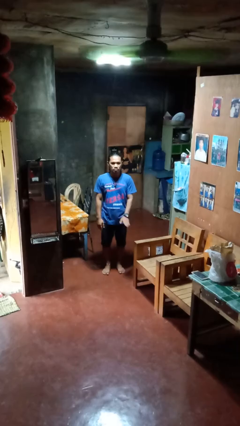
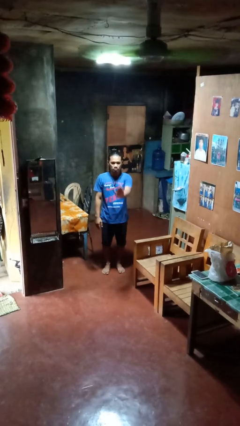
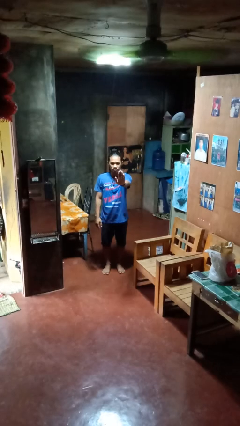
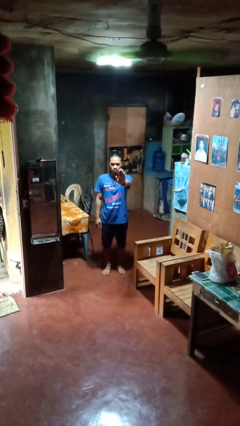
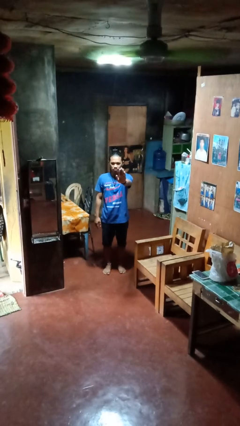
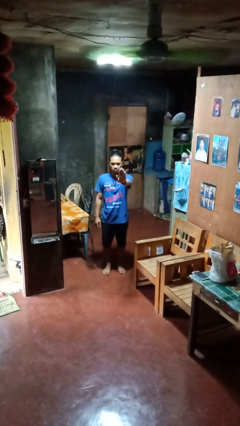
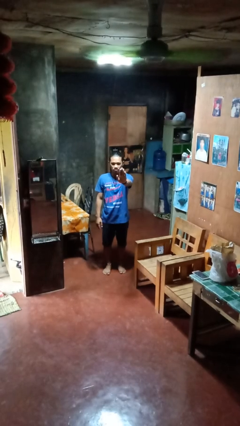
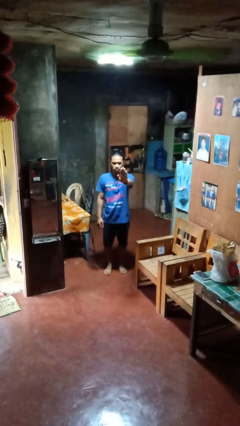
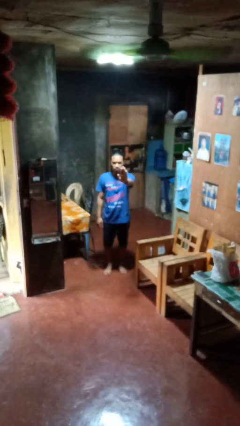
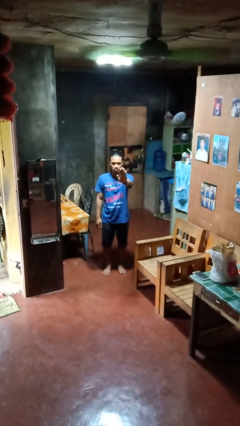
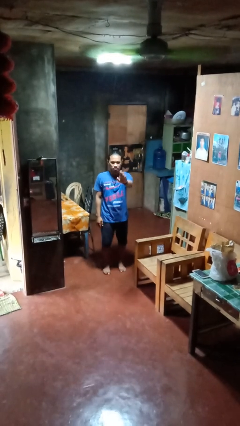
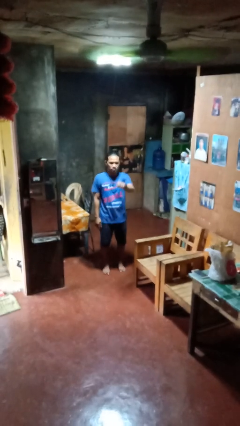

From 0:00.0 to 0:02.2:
person gestures stop

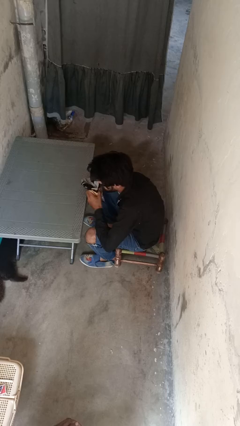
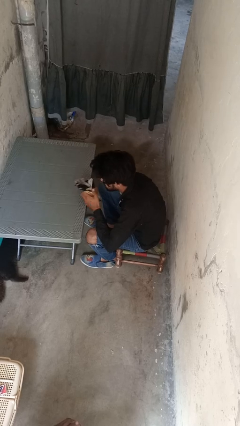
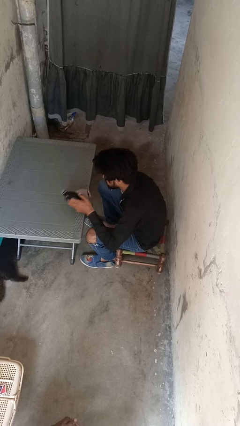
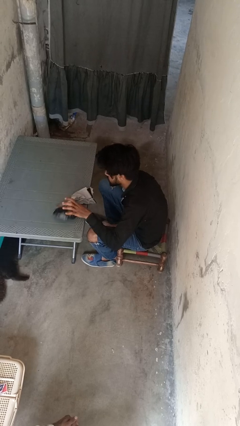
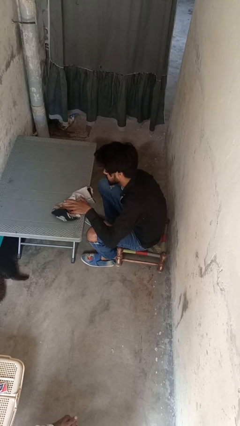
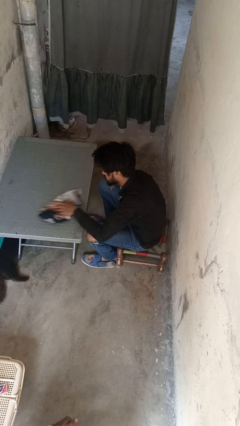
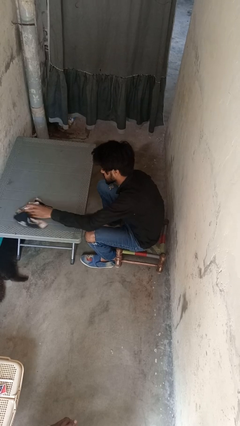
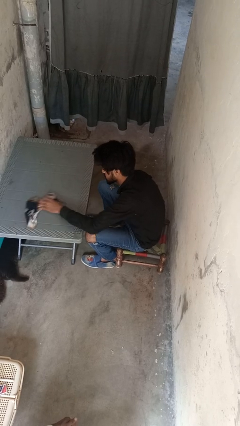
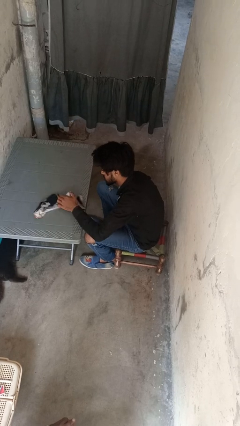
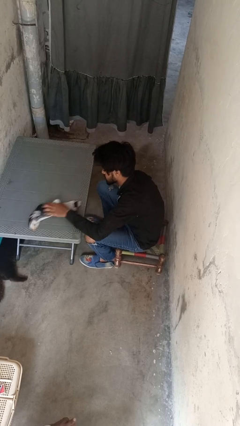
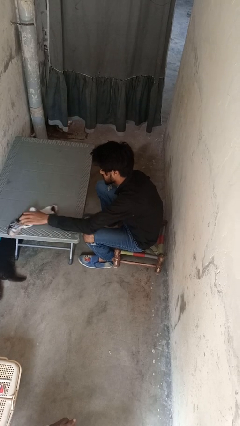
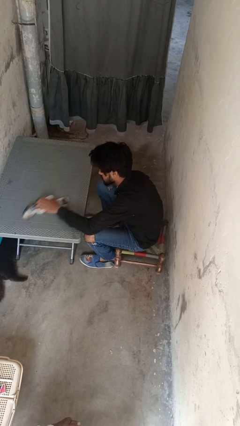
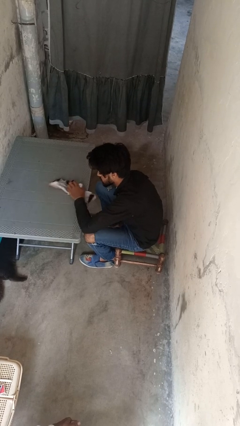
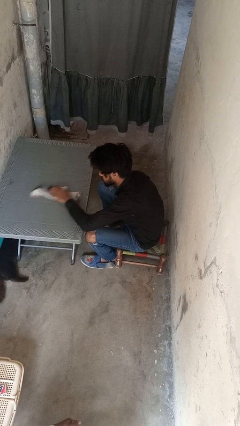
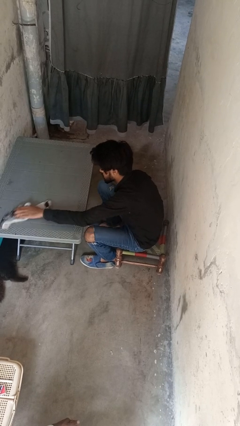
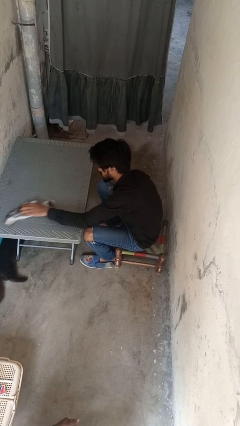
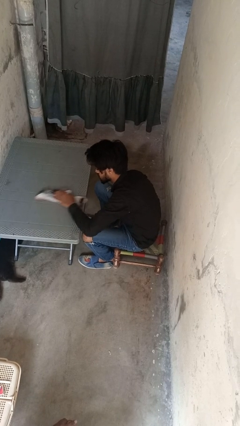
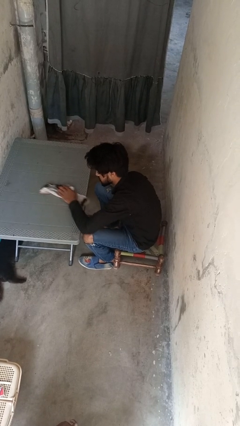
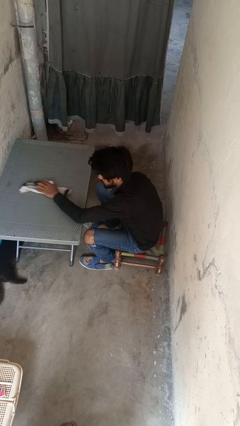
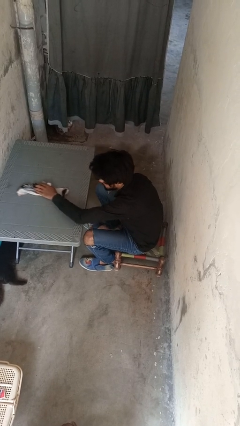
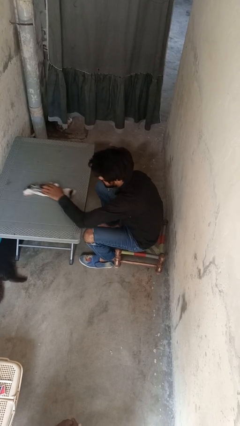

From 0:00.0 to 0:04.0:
person cleans table with rag

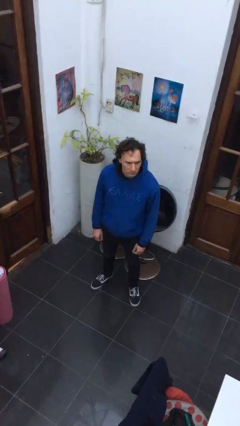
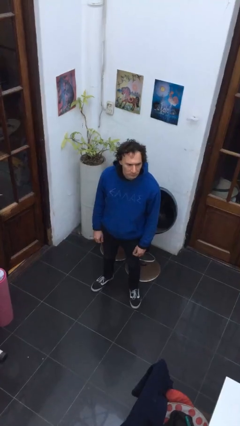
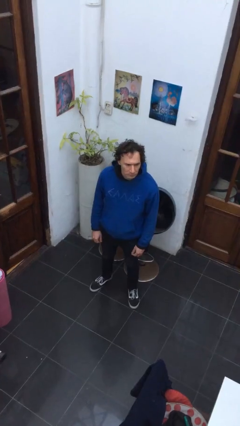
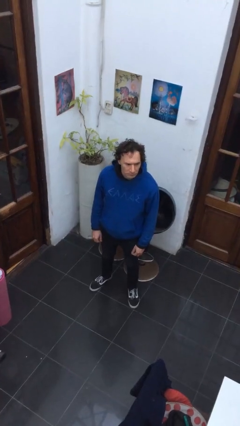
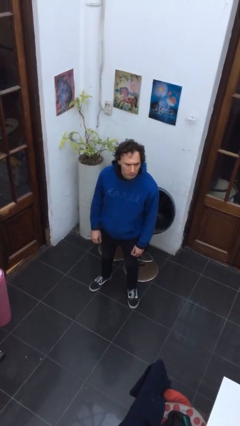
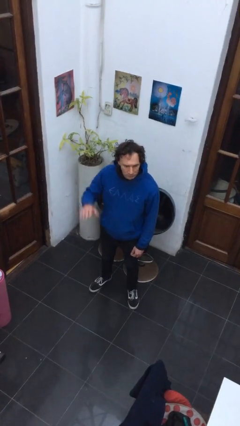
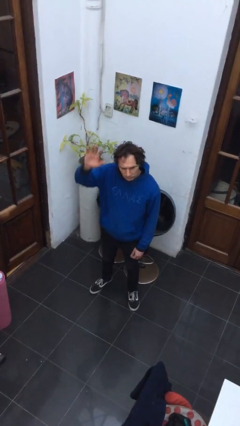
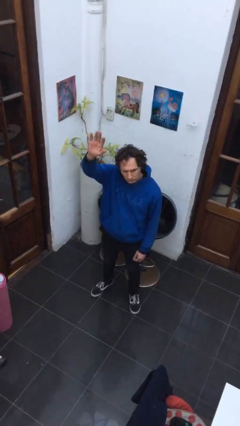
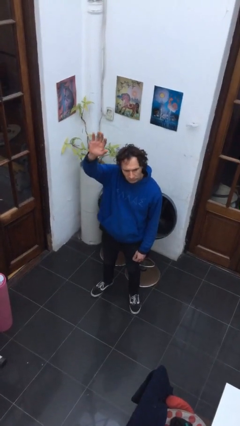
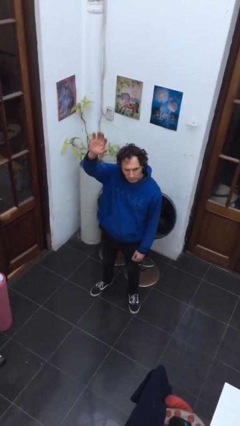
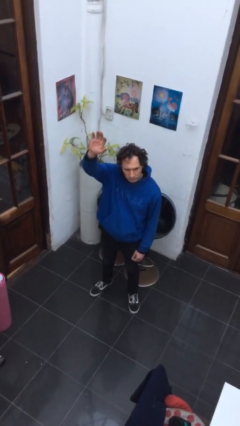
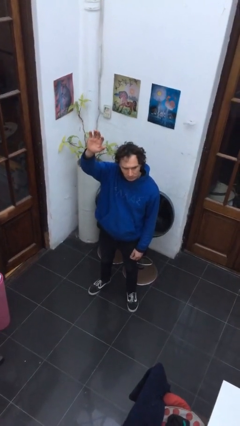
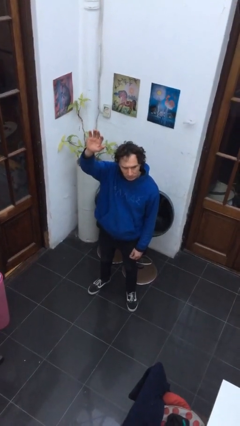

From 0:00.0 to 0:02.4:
person gestures raise hand

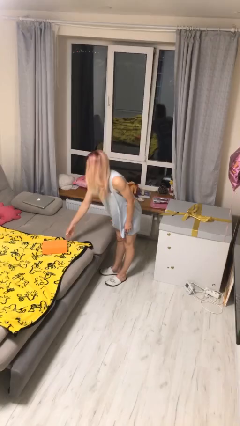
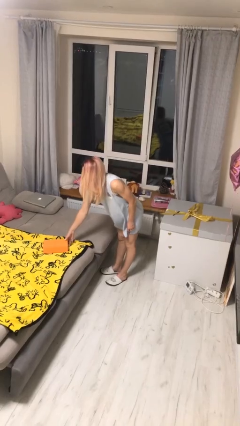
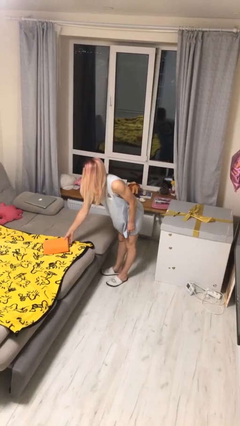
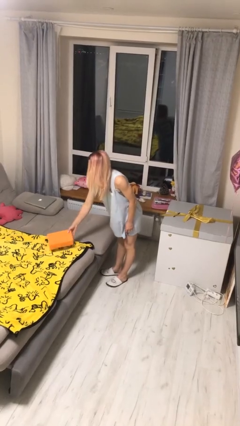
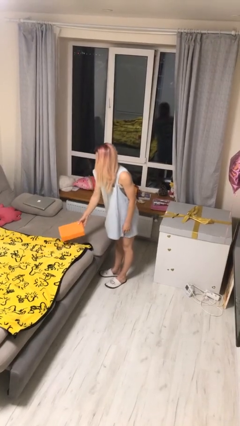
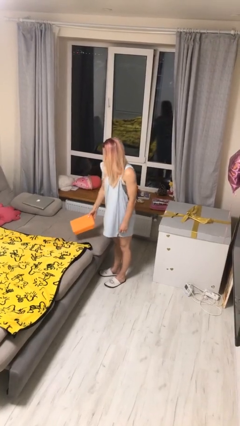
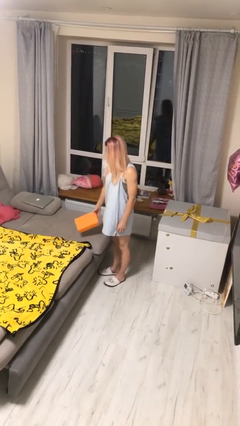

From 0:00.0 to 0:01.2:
person picks up object from bed

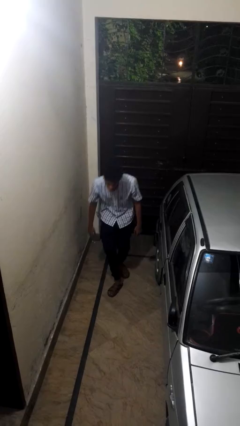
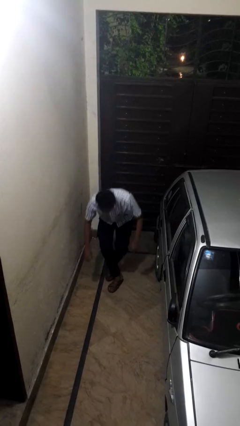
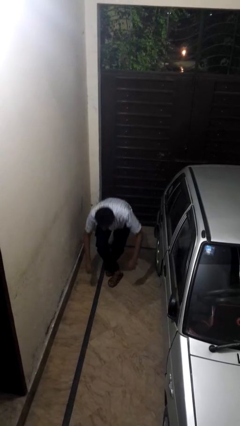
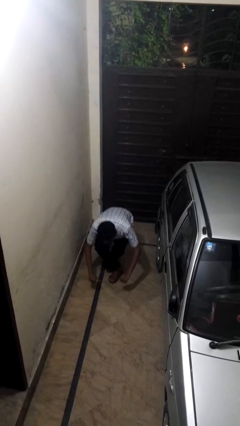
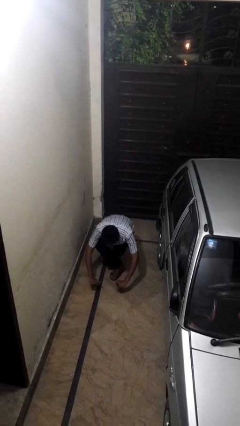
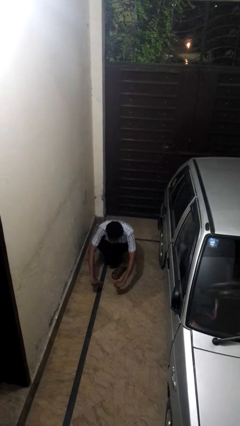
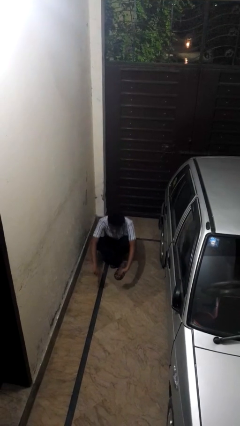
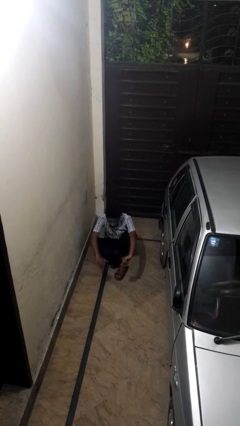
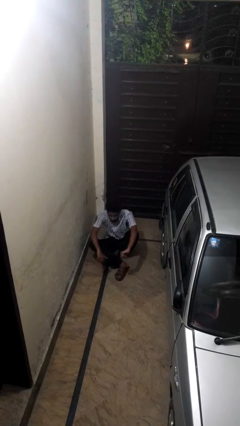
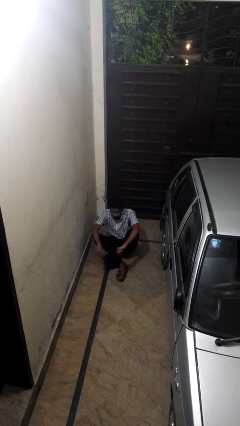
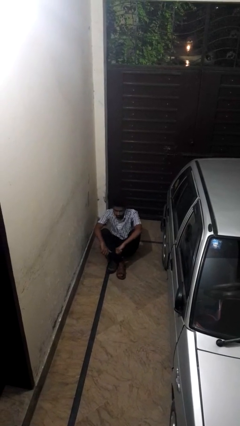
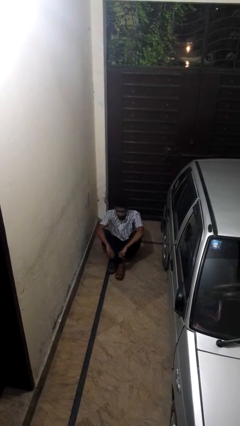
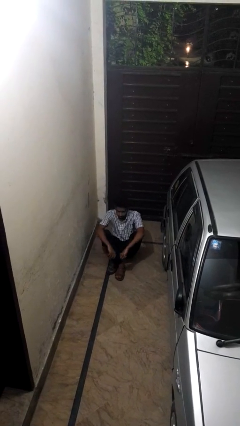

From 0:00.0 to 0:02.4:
person sits crisscross

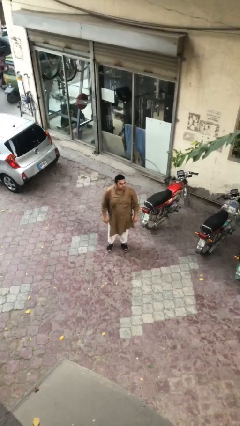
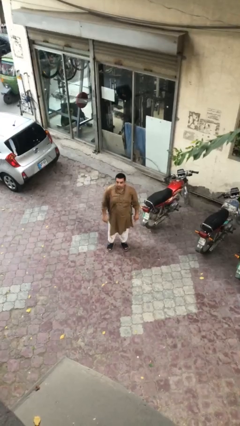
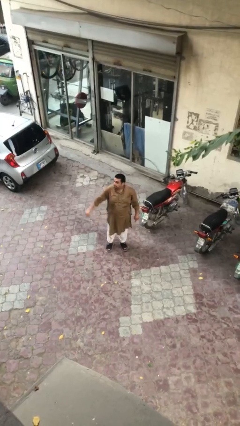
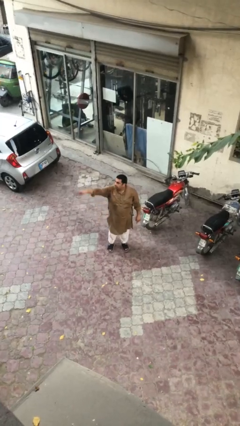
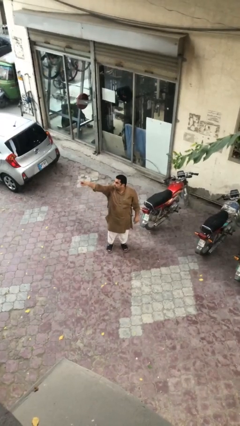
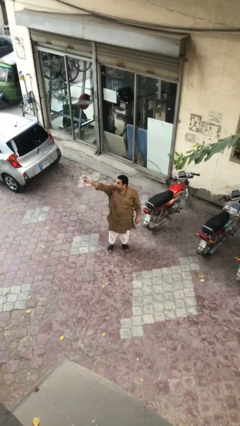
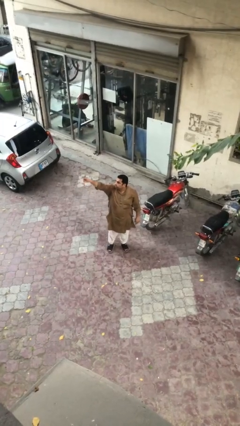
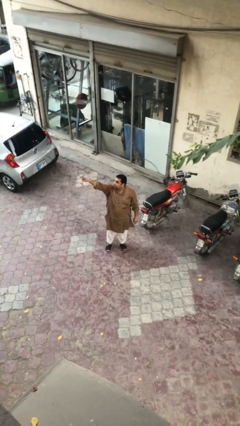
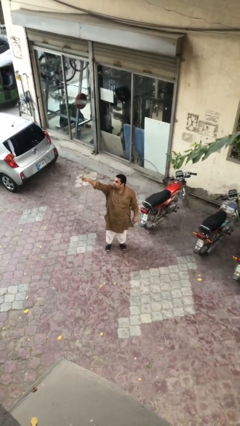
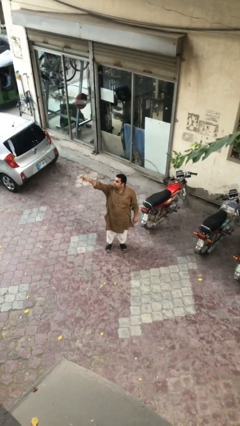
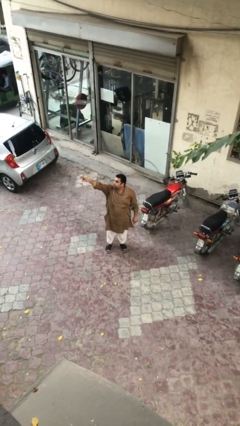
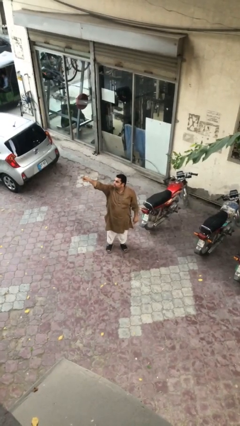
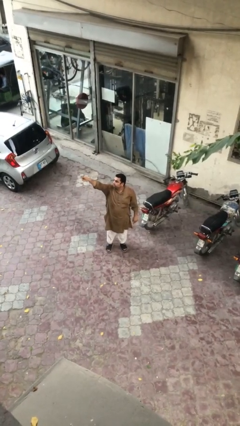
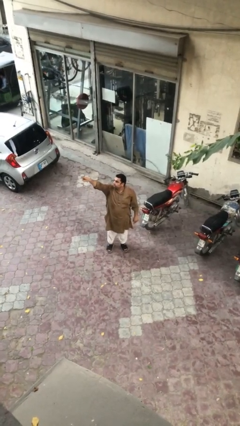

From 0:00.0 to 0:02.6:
person points at person

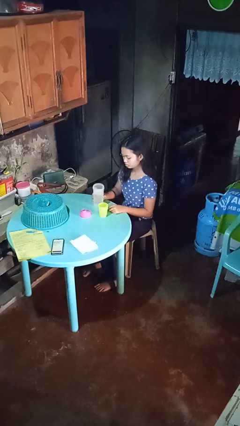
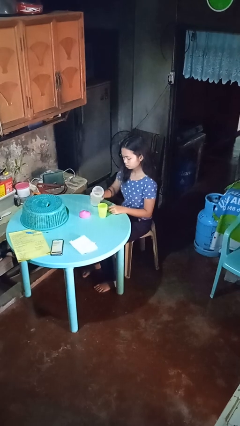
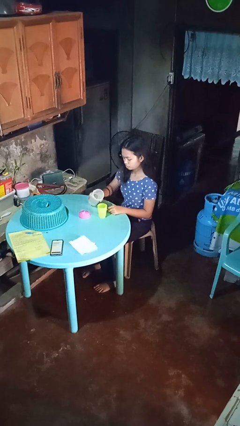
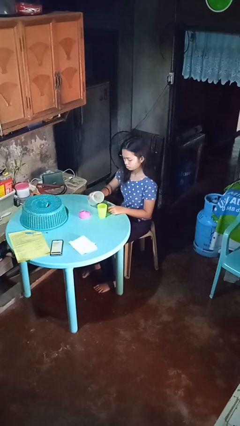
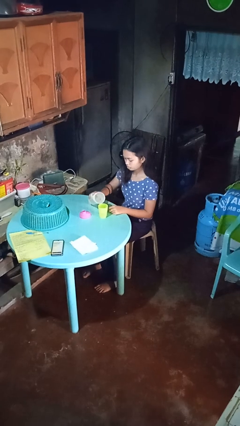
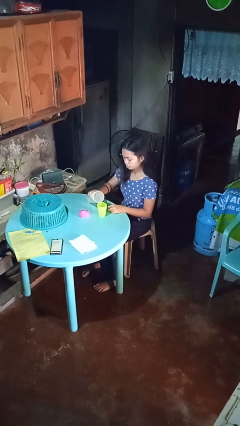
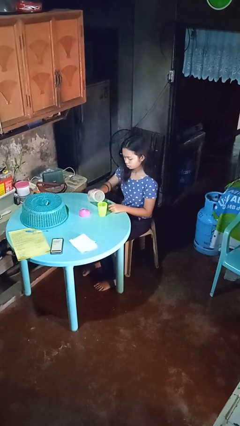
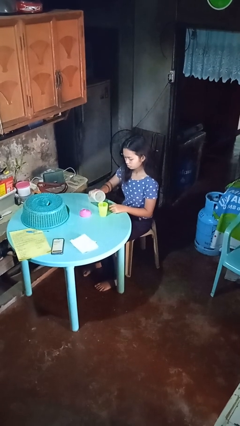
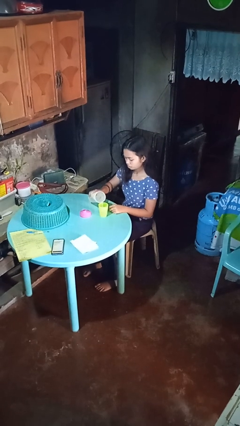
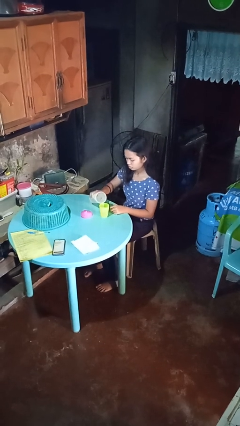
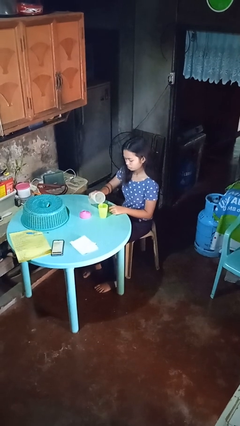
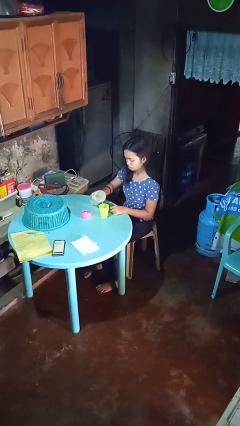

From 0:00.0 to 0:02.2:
person pours liquid into cup
